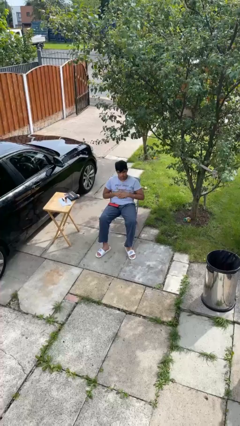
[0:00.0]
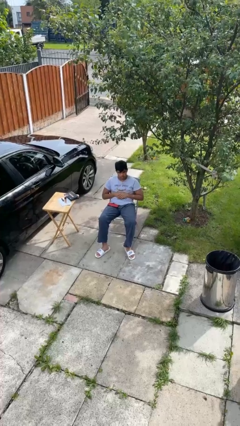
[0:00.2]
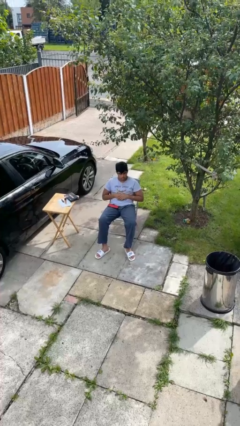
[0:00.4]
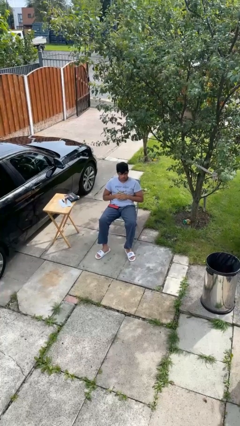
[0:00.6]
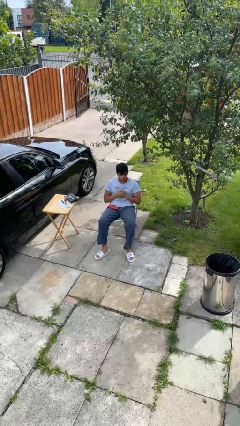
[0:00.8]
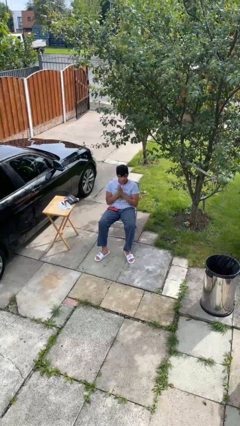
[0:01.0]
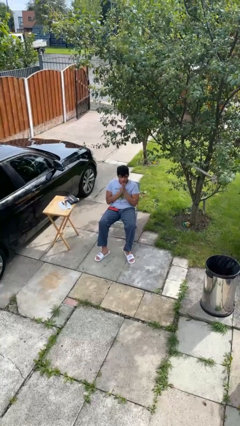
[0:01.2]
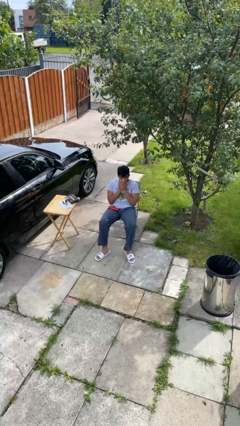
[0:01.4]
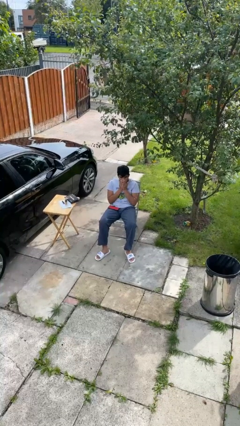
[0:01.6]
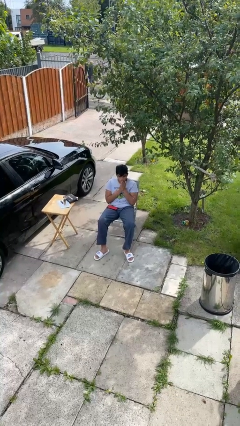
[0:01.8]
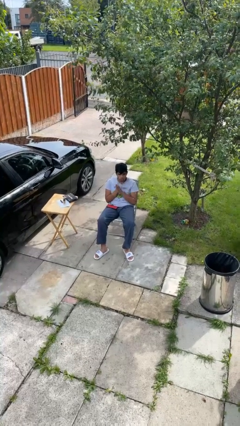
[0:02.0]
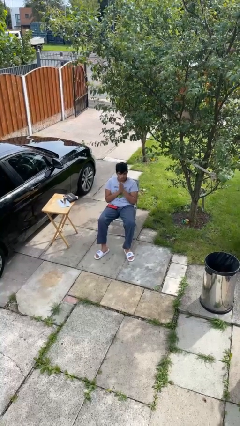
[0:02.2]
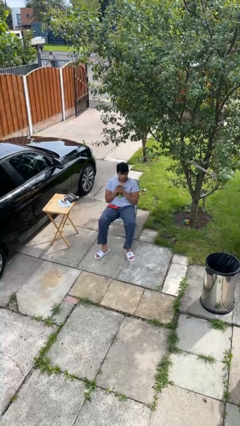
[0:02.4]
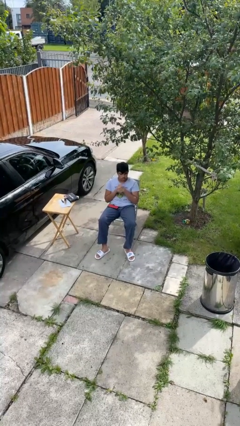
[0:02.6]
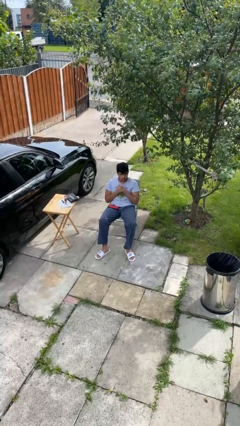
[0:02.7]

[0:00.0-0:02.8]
person blows into hands

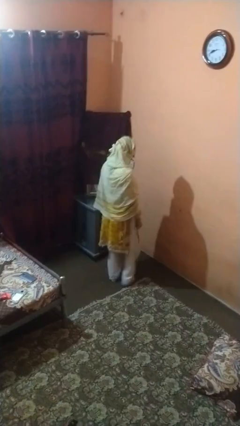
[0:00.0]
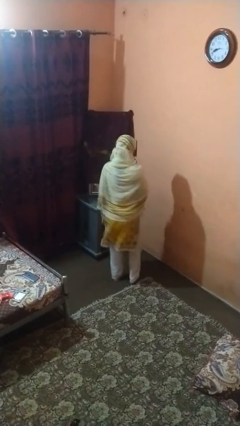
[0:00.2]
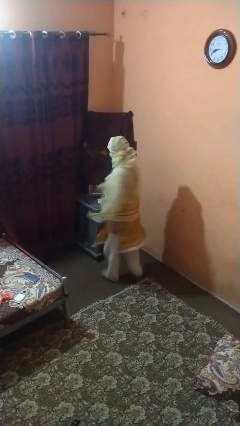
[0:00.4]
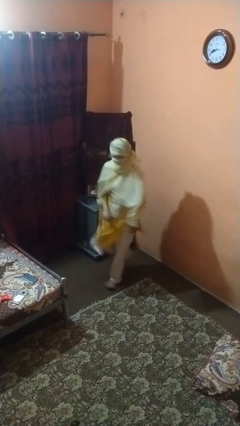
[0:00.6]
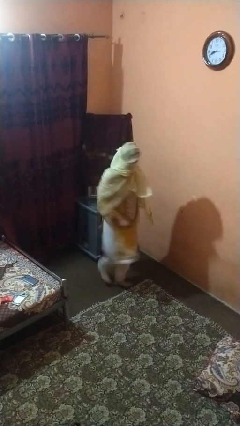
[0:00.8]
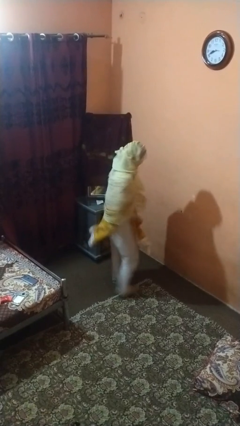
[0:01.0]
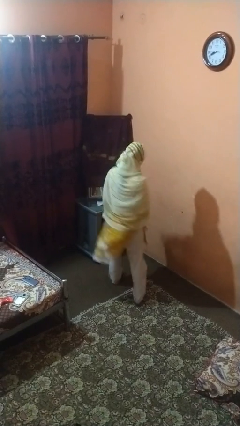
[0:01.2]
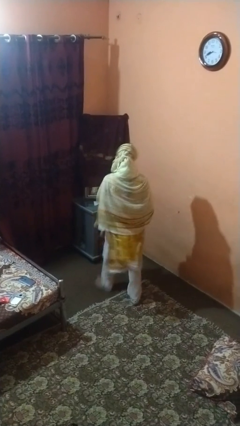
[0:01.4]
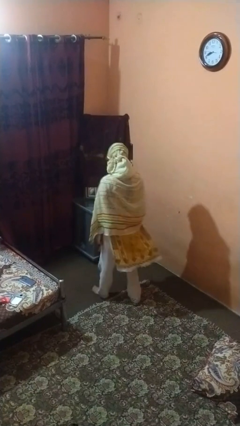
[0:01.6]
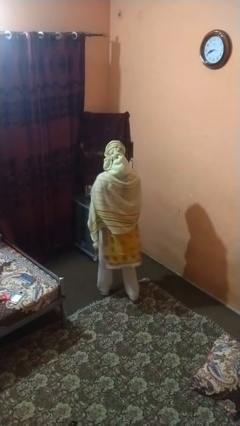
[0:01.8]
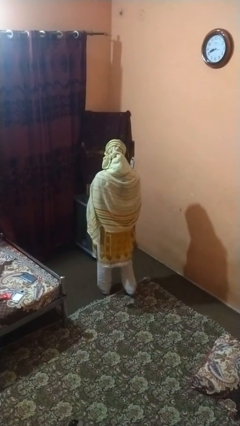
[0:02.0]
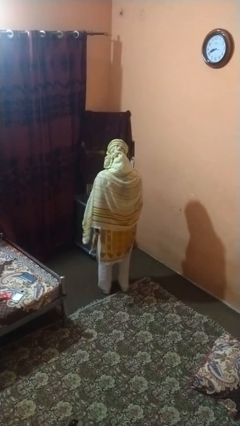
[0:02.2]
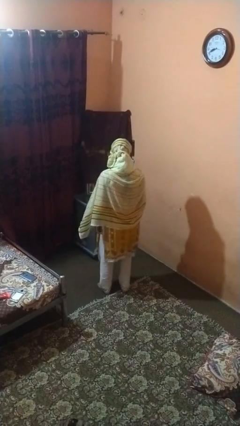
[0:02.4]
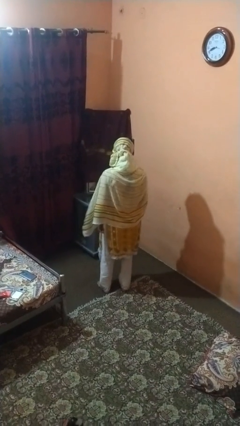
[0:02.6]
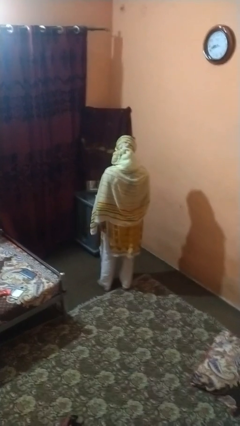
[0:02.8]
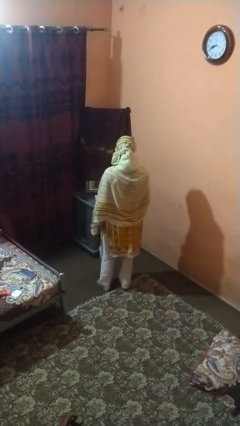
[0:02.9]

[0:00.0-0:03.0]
person twirls

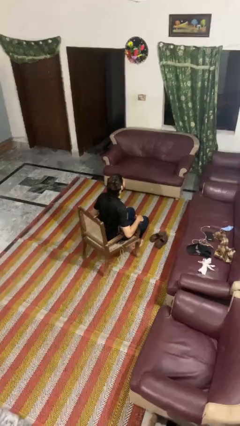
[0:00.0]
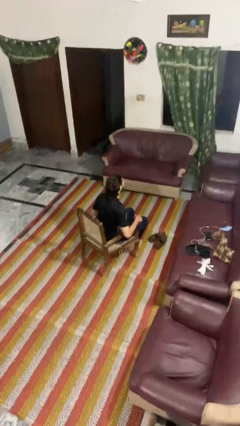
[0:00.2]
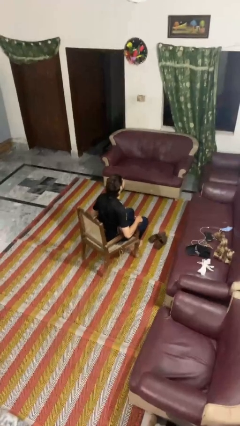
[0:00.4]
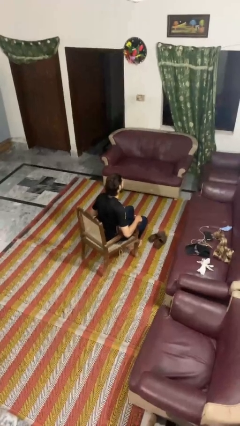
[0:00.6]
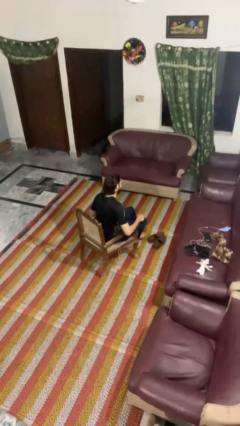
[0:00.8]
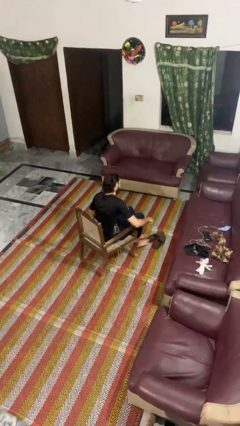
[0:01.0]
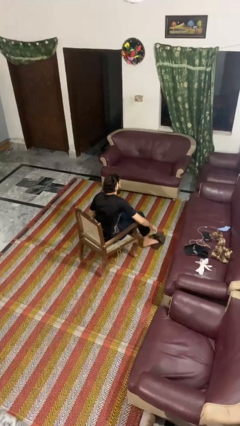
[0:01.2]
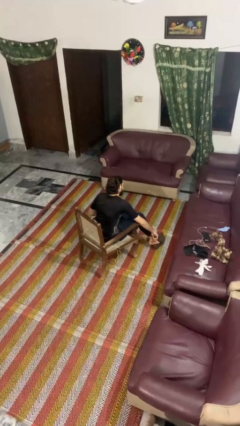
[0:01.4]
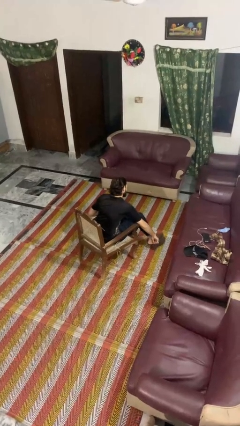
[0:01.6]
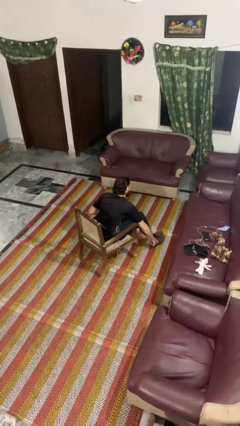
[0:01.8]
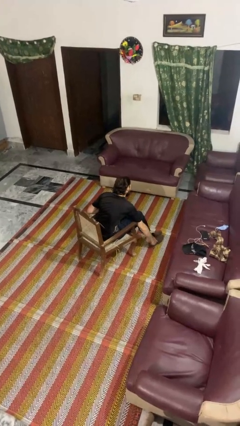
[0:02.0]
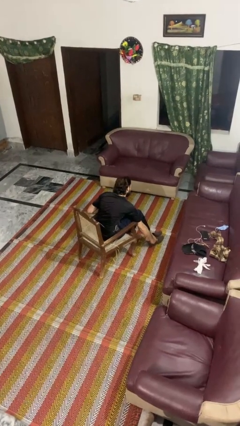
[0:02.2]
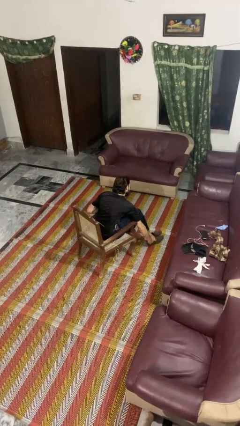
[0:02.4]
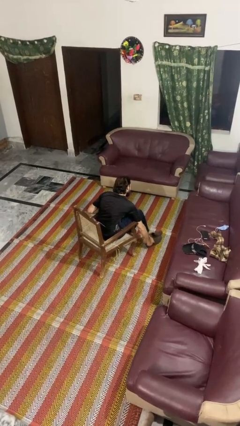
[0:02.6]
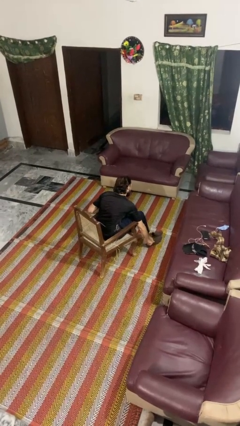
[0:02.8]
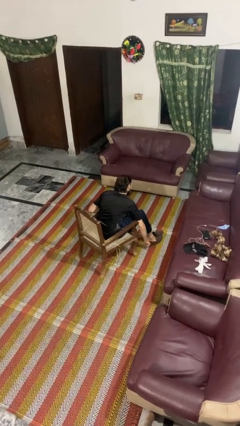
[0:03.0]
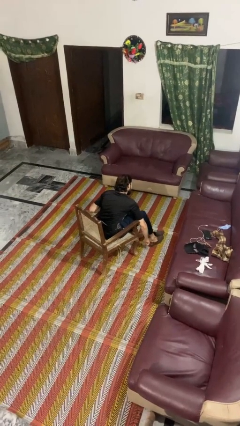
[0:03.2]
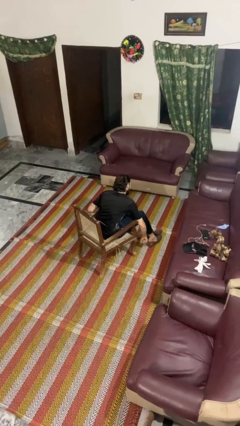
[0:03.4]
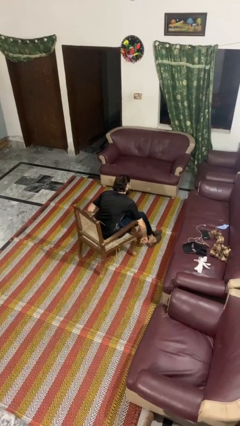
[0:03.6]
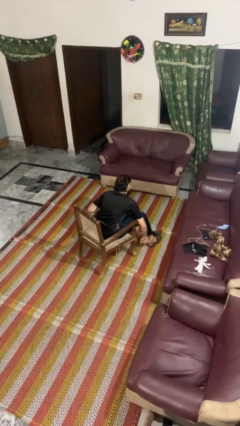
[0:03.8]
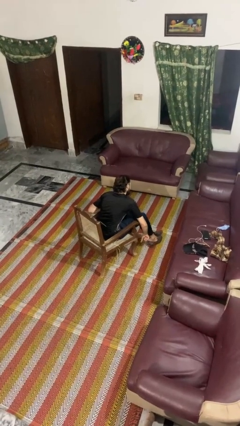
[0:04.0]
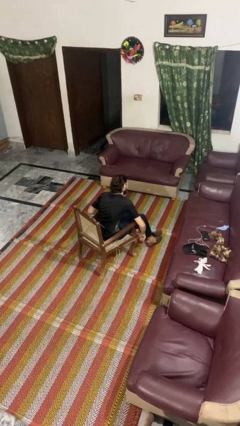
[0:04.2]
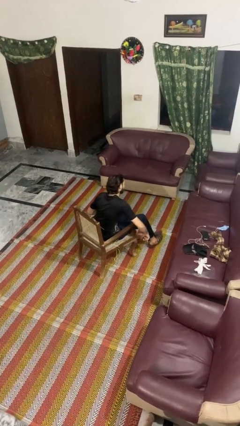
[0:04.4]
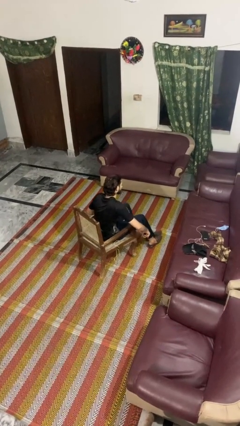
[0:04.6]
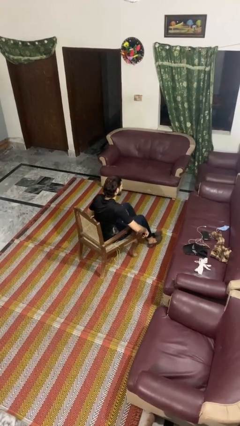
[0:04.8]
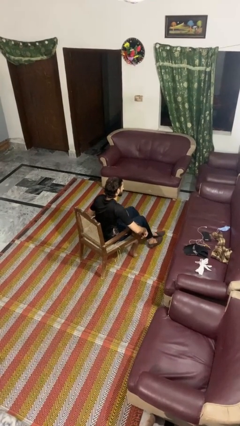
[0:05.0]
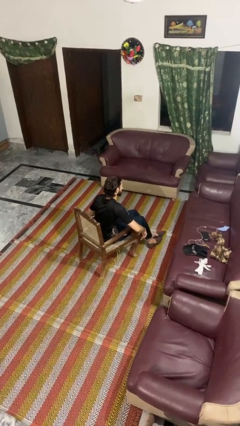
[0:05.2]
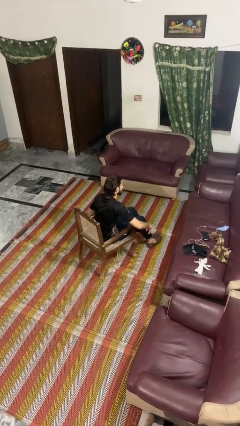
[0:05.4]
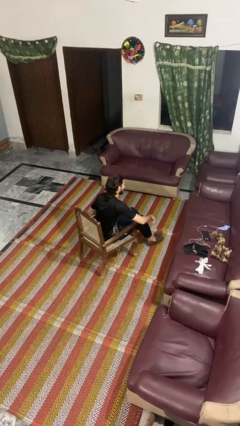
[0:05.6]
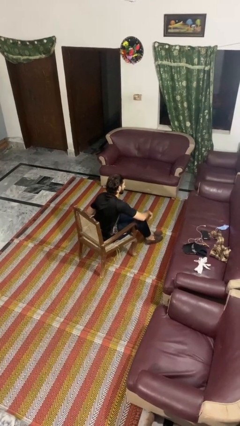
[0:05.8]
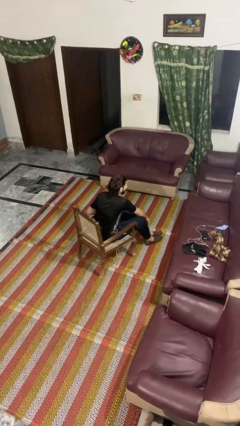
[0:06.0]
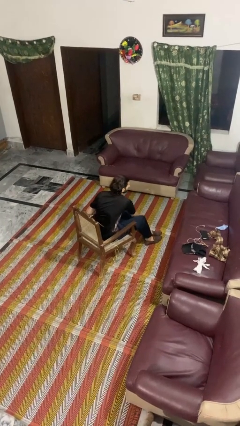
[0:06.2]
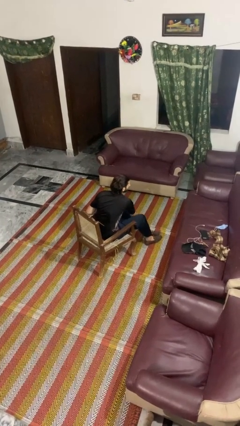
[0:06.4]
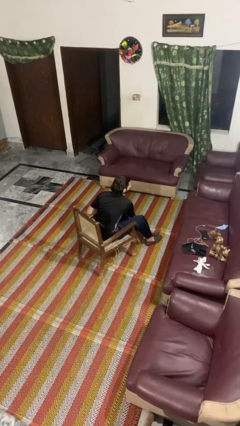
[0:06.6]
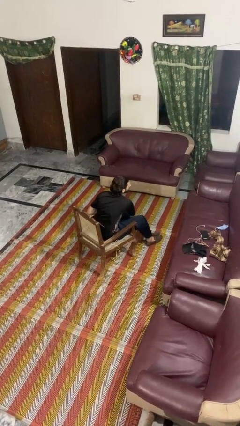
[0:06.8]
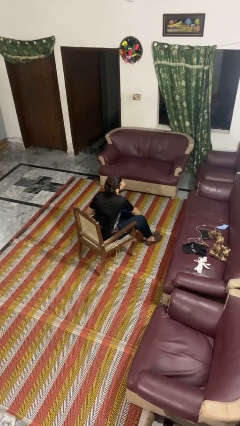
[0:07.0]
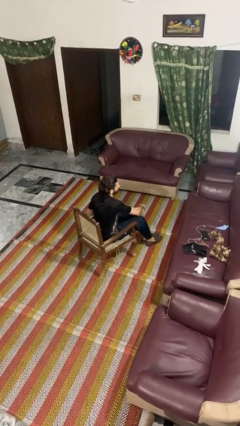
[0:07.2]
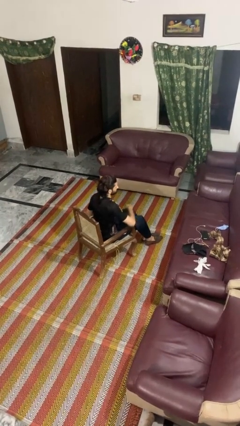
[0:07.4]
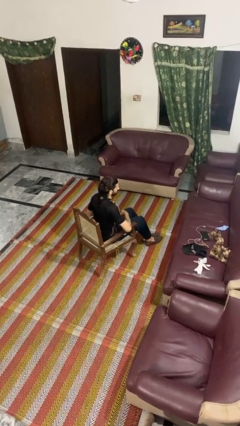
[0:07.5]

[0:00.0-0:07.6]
person puts on shoes

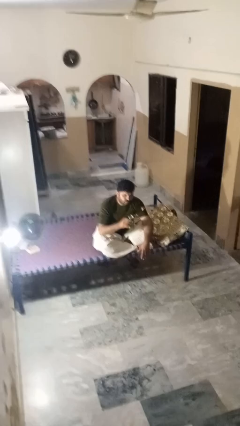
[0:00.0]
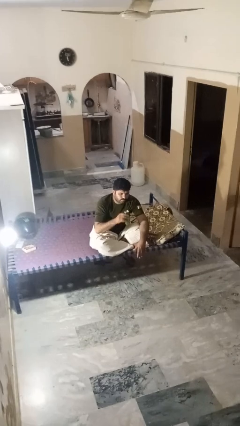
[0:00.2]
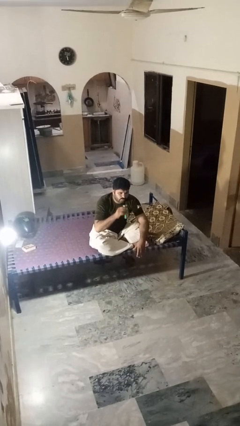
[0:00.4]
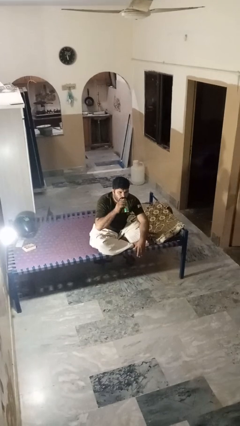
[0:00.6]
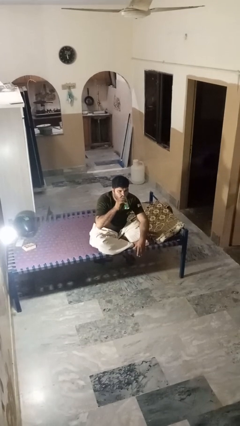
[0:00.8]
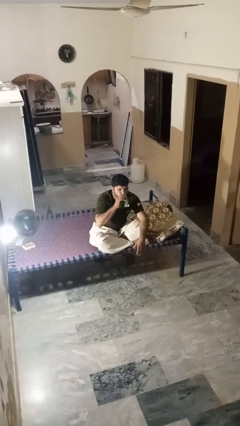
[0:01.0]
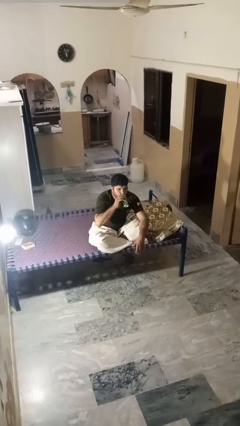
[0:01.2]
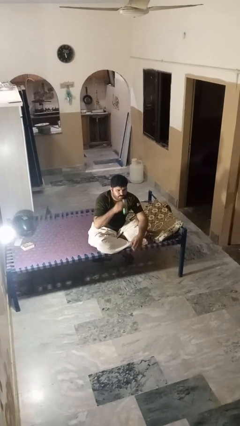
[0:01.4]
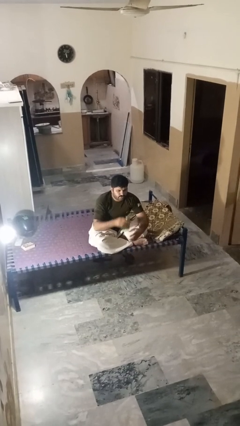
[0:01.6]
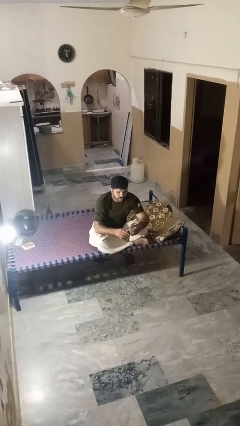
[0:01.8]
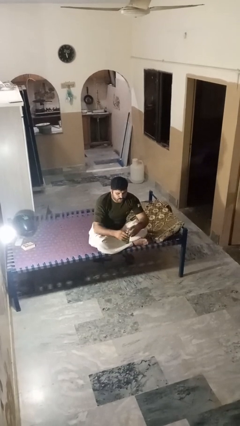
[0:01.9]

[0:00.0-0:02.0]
person drinks from beverage can

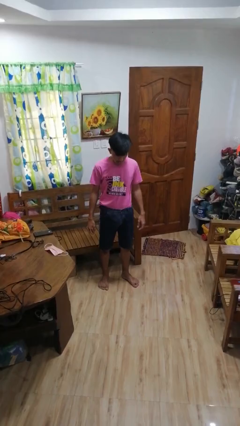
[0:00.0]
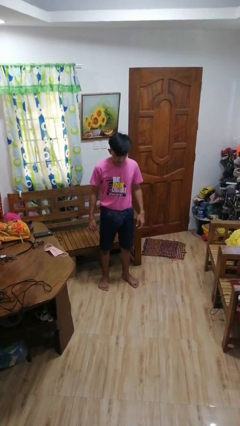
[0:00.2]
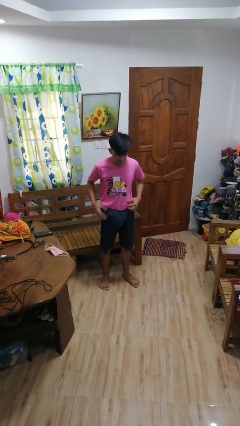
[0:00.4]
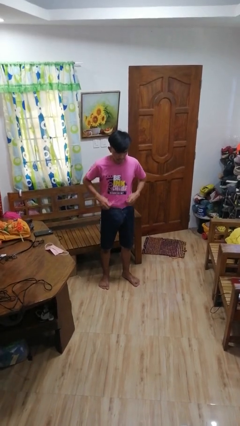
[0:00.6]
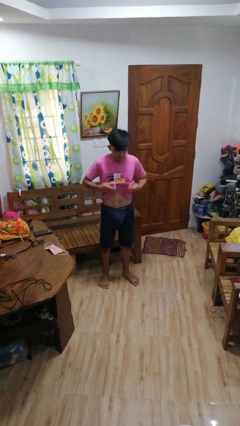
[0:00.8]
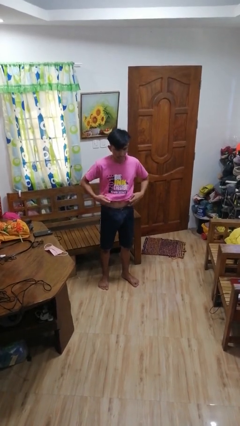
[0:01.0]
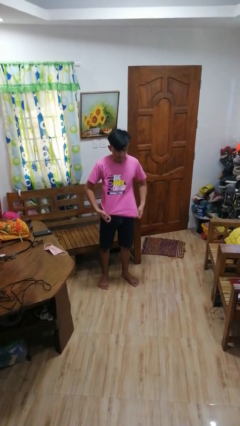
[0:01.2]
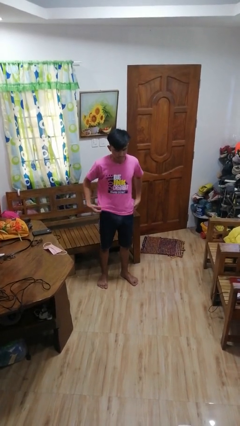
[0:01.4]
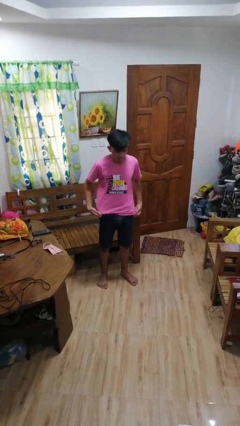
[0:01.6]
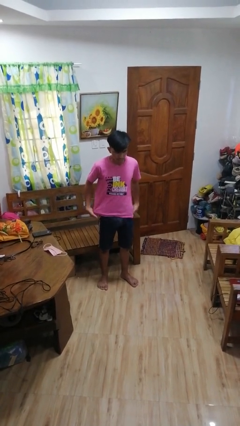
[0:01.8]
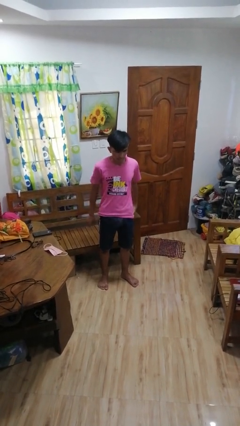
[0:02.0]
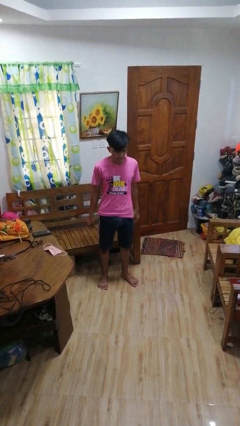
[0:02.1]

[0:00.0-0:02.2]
person untucks shirt
